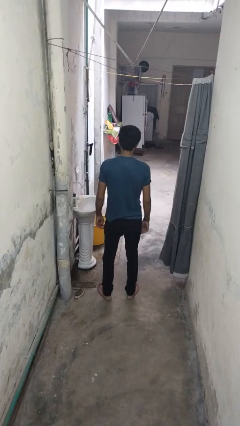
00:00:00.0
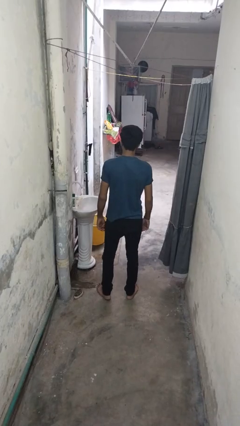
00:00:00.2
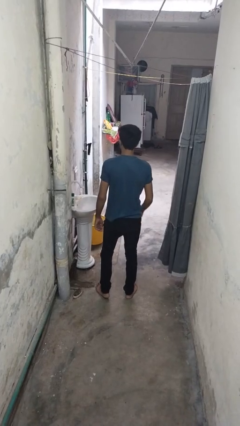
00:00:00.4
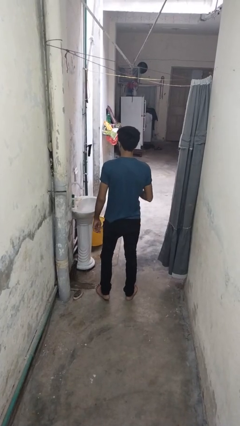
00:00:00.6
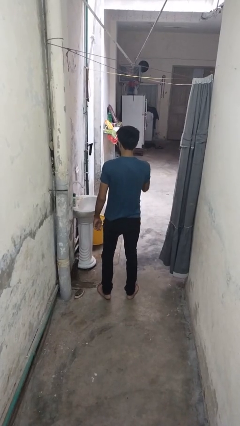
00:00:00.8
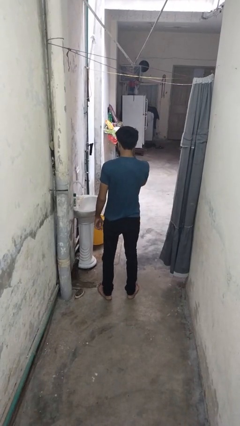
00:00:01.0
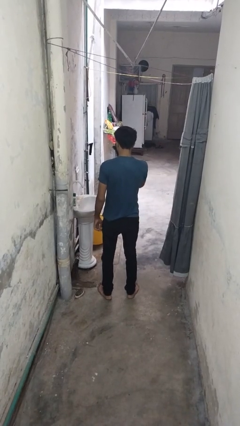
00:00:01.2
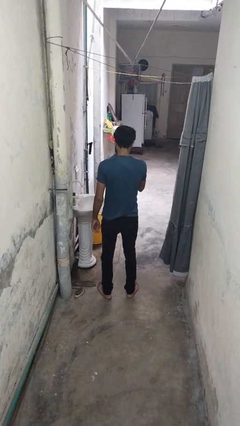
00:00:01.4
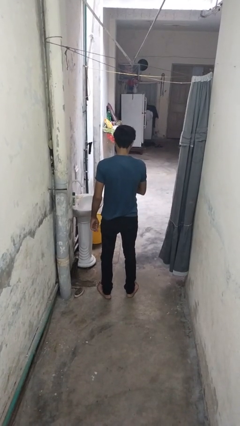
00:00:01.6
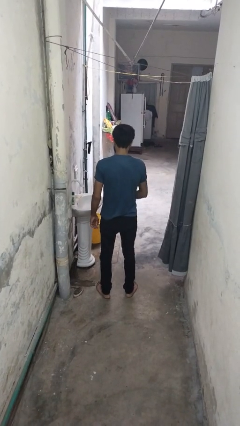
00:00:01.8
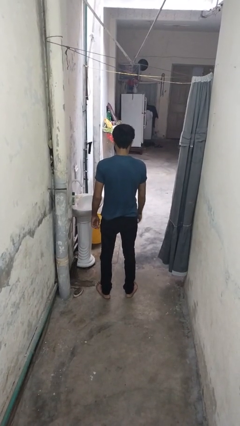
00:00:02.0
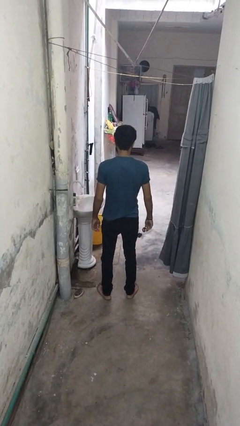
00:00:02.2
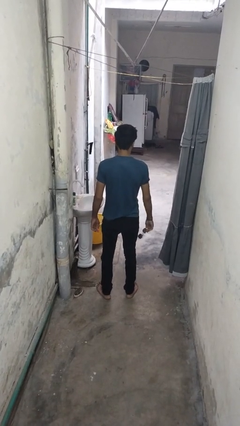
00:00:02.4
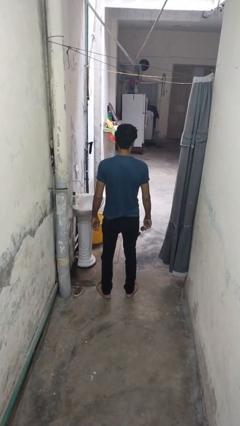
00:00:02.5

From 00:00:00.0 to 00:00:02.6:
person takes off sunglasses

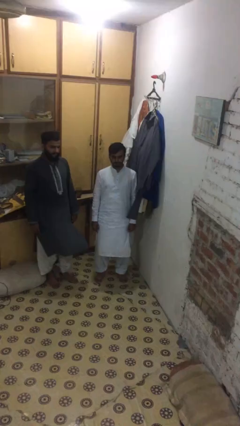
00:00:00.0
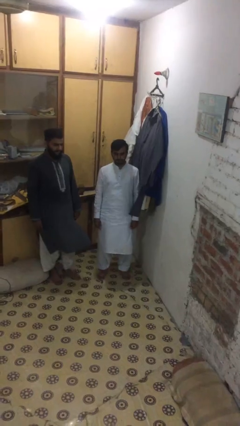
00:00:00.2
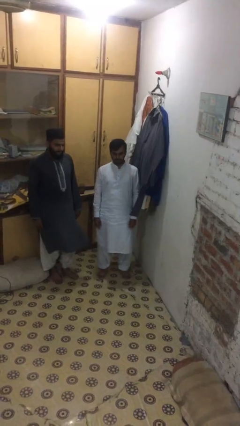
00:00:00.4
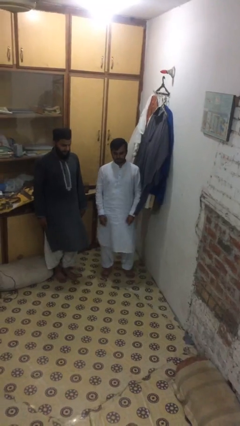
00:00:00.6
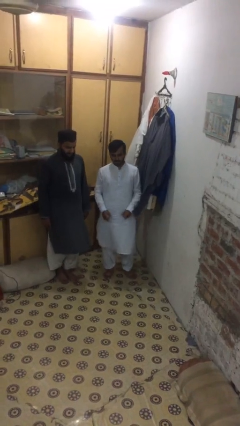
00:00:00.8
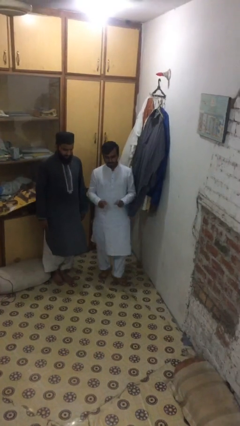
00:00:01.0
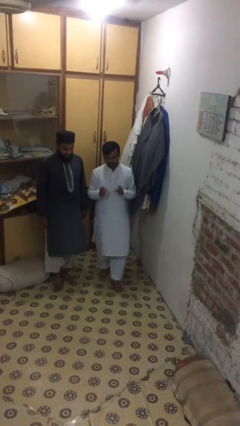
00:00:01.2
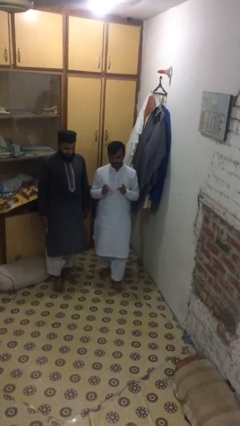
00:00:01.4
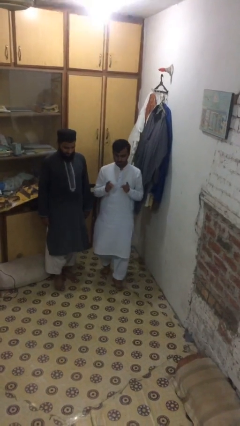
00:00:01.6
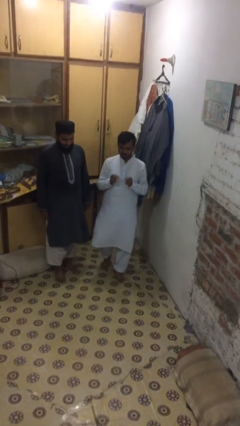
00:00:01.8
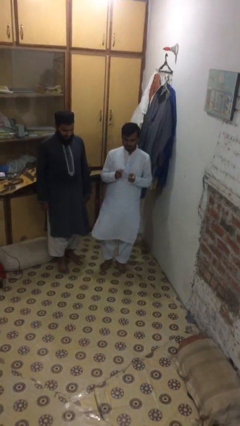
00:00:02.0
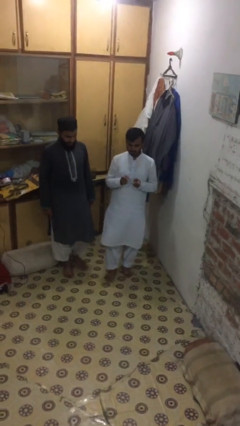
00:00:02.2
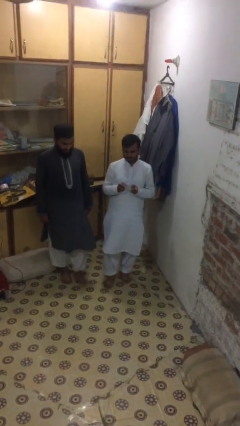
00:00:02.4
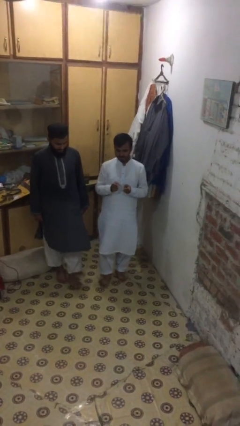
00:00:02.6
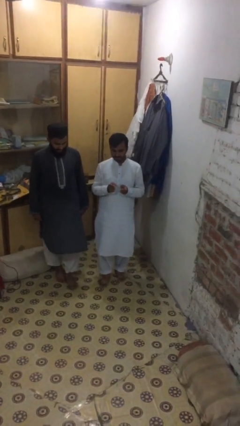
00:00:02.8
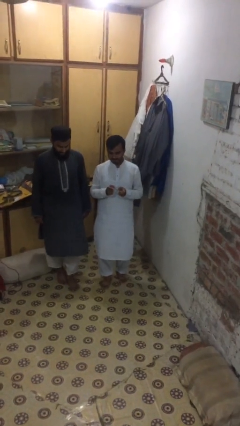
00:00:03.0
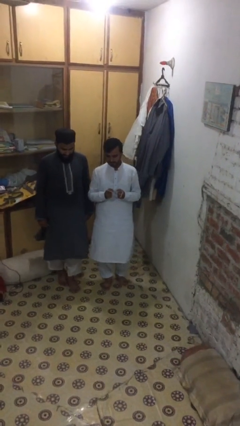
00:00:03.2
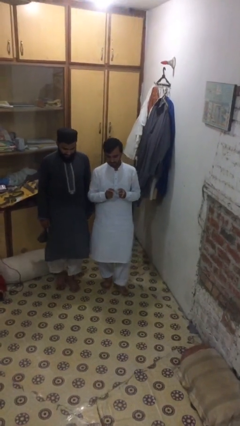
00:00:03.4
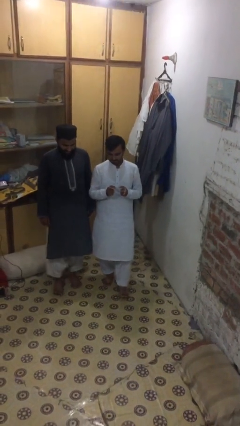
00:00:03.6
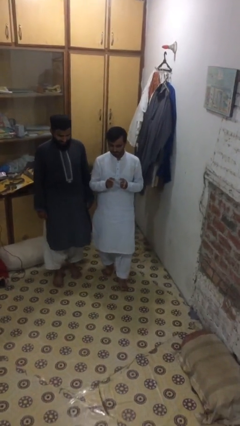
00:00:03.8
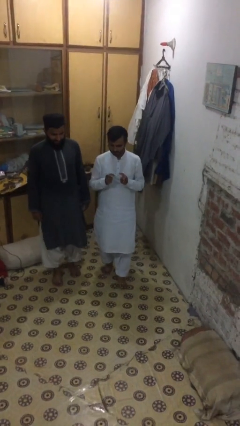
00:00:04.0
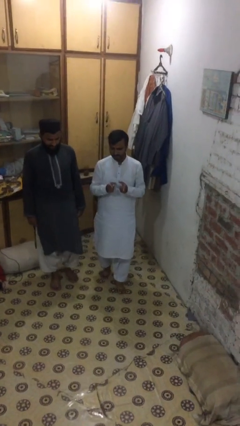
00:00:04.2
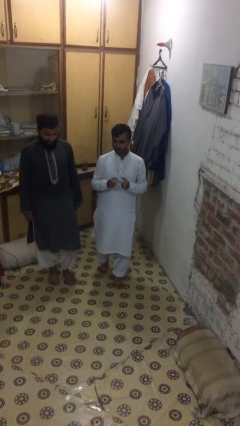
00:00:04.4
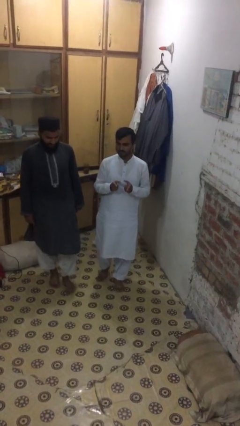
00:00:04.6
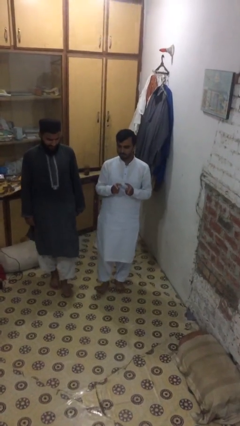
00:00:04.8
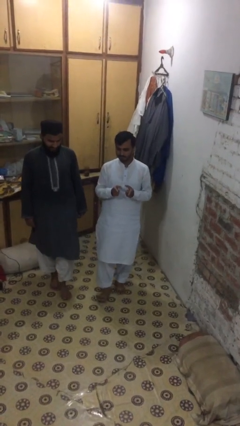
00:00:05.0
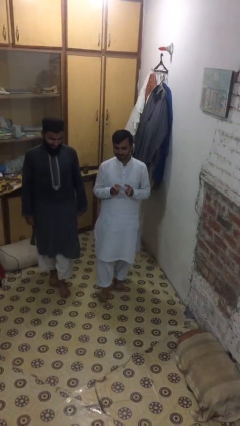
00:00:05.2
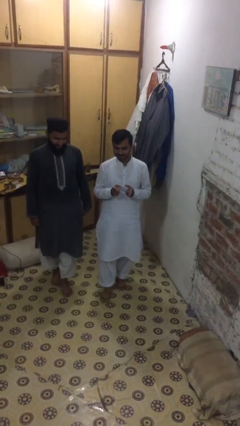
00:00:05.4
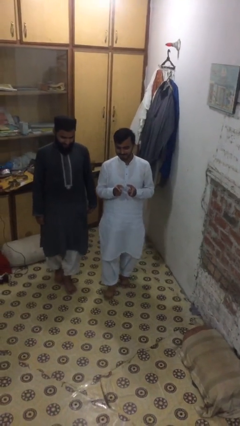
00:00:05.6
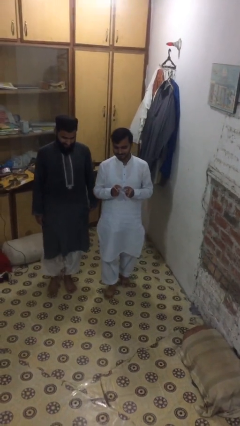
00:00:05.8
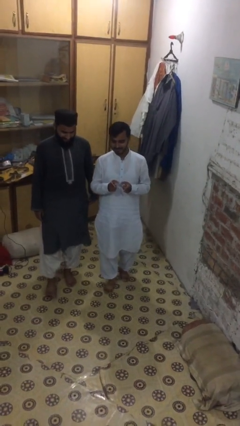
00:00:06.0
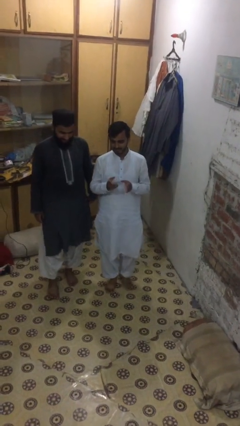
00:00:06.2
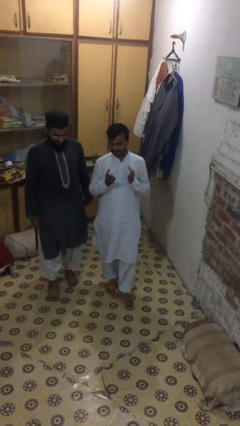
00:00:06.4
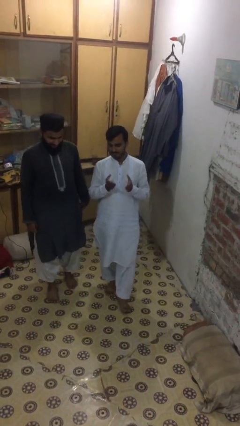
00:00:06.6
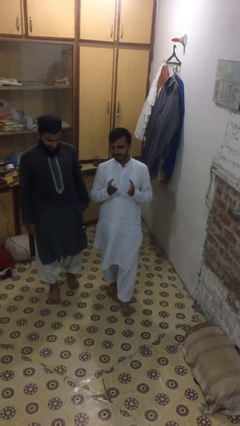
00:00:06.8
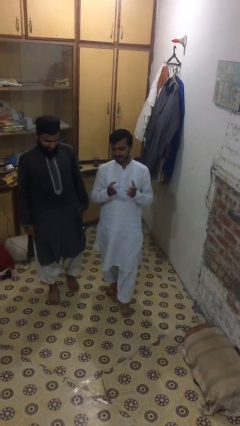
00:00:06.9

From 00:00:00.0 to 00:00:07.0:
person talks to person

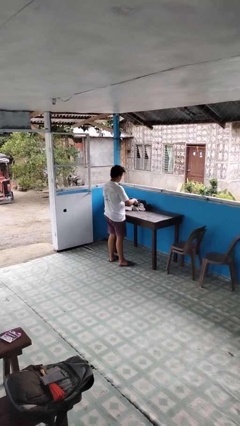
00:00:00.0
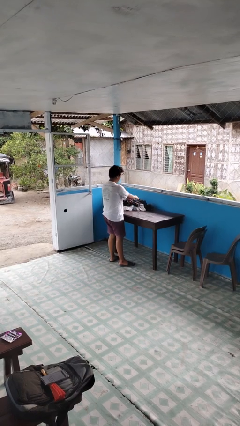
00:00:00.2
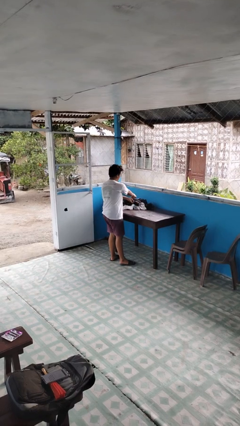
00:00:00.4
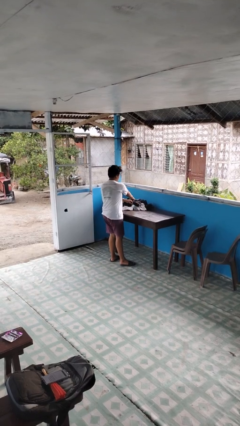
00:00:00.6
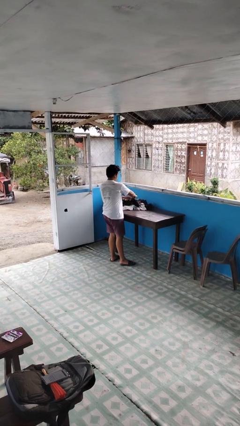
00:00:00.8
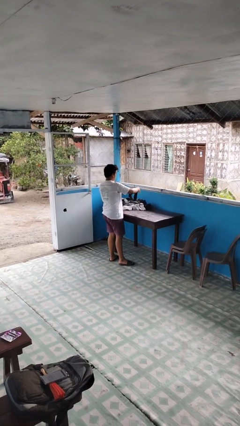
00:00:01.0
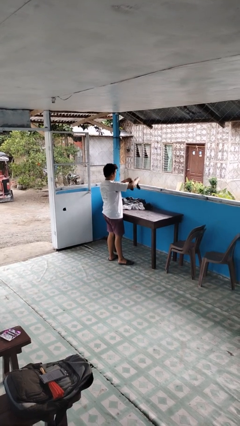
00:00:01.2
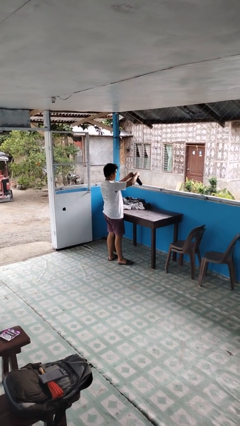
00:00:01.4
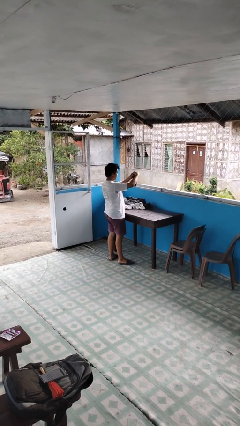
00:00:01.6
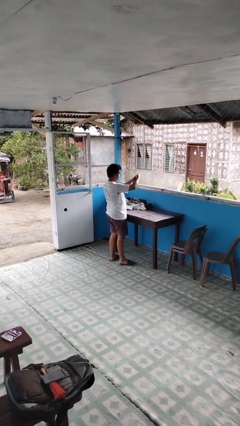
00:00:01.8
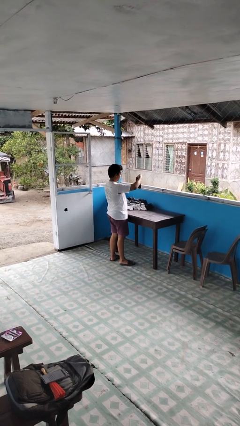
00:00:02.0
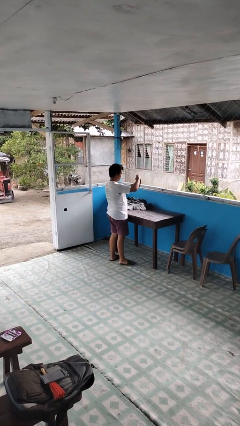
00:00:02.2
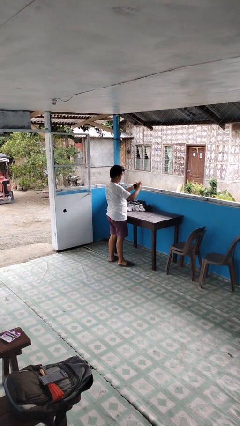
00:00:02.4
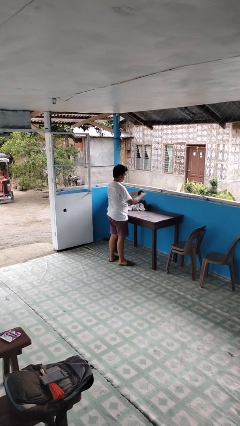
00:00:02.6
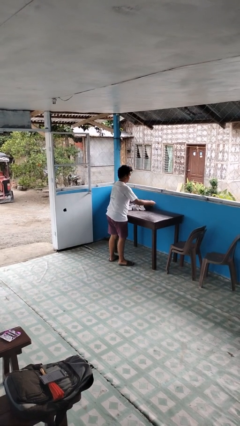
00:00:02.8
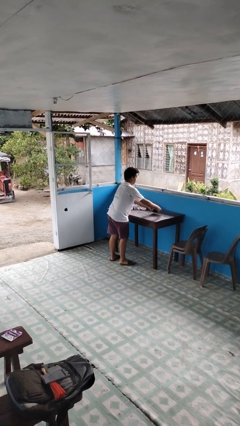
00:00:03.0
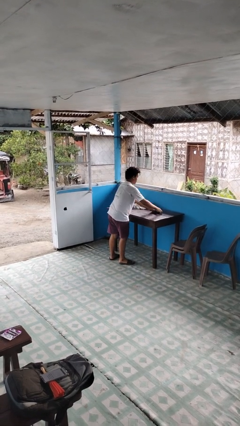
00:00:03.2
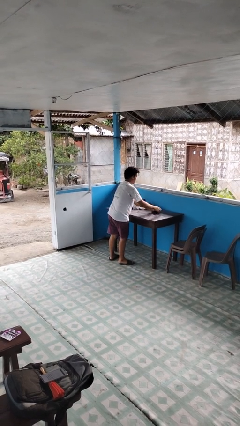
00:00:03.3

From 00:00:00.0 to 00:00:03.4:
person folds socks

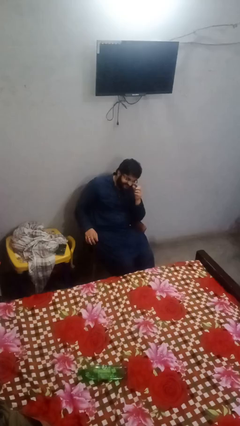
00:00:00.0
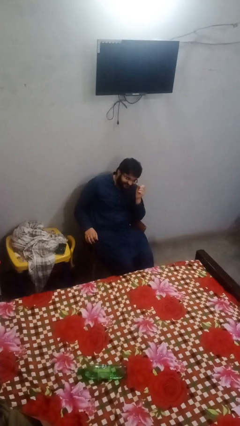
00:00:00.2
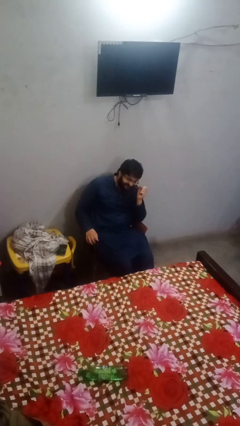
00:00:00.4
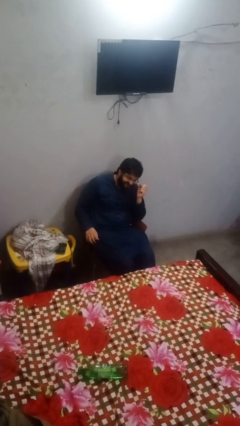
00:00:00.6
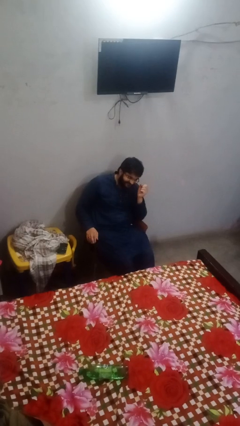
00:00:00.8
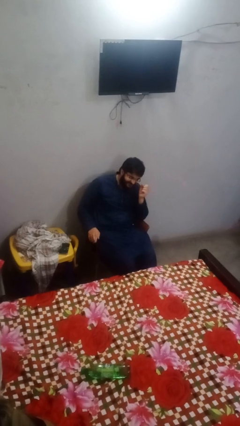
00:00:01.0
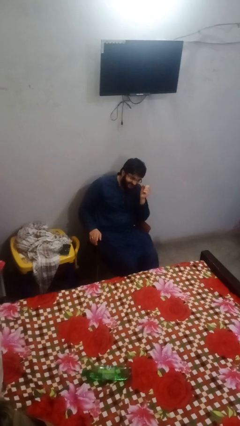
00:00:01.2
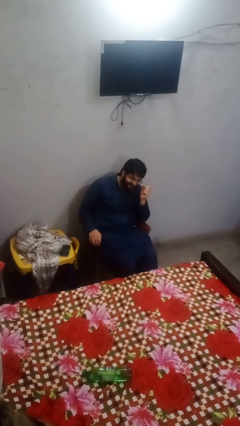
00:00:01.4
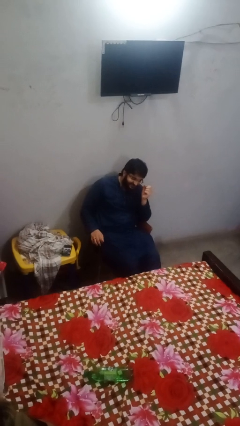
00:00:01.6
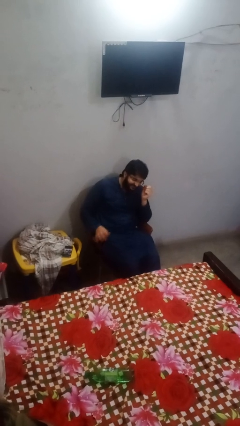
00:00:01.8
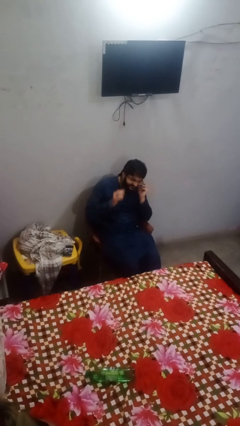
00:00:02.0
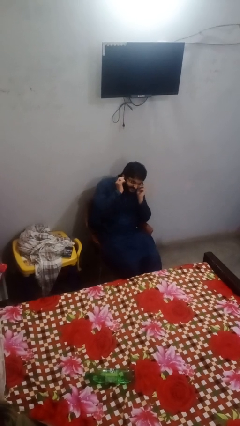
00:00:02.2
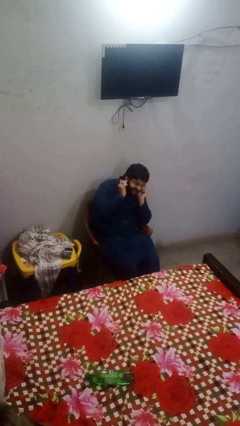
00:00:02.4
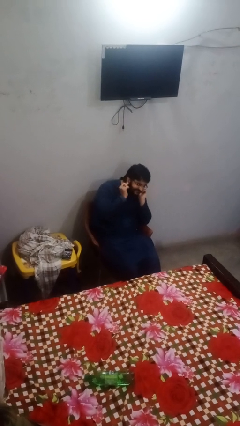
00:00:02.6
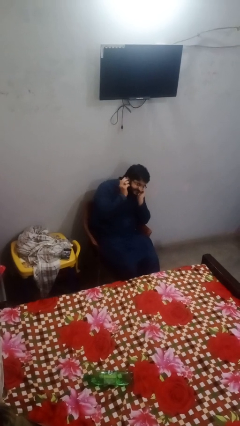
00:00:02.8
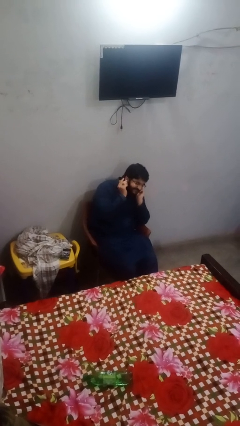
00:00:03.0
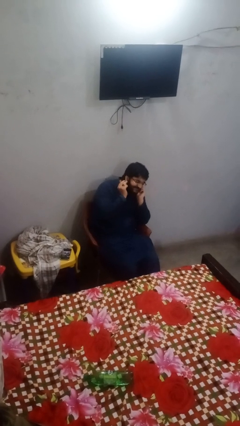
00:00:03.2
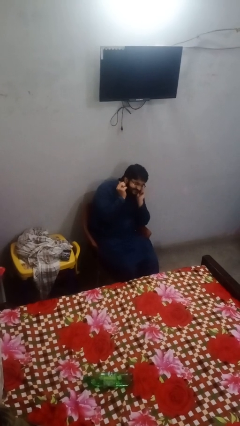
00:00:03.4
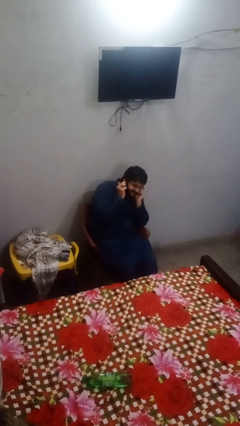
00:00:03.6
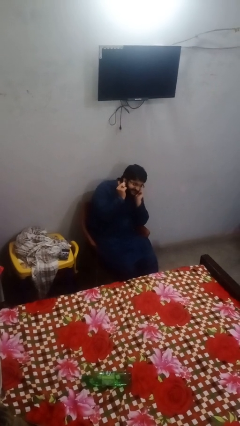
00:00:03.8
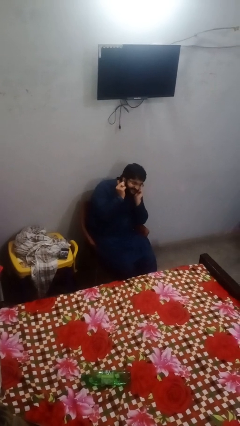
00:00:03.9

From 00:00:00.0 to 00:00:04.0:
person touches earlobe

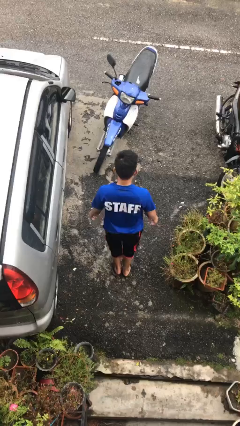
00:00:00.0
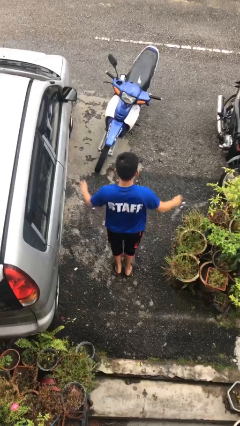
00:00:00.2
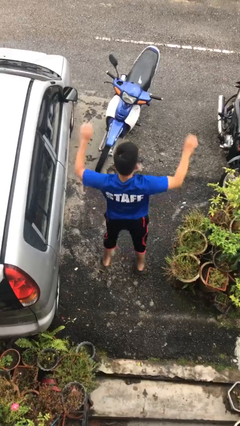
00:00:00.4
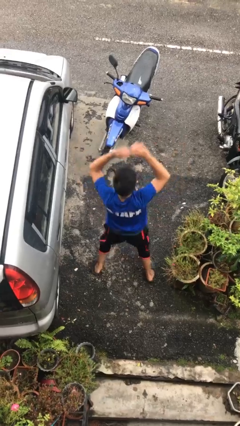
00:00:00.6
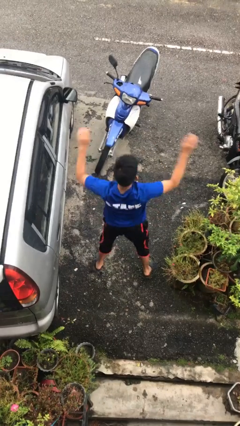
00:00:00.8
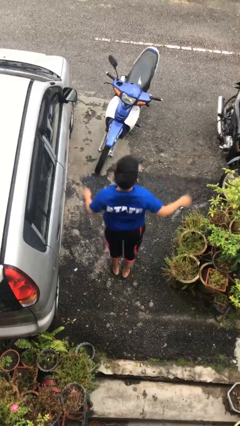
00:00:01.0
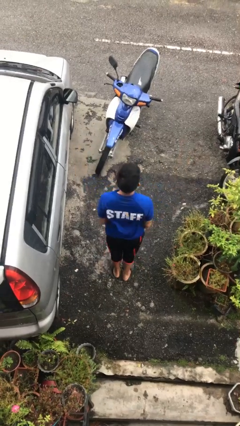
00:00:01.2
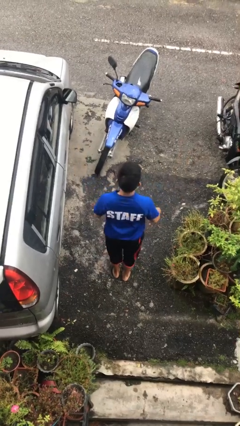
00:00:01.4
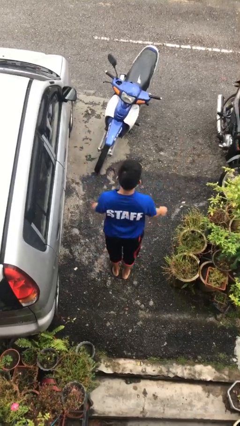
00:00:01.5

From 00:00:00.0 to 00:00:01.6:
person exercises with jumping jacks
